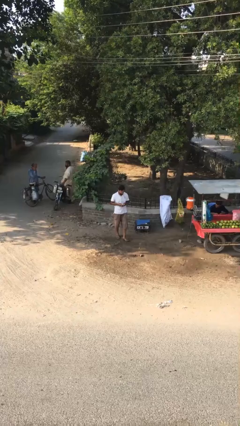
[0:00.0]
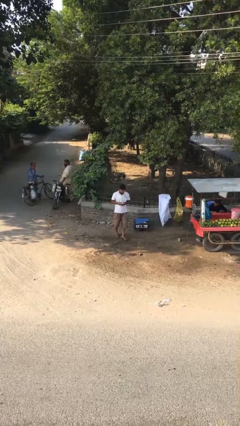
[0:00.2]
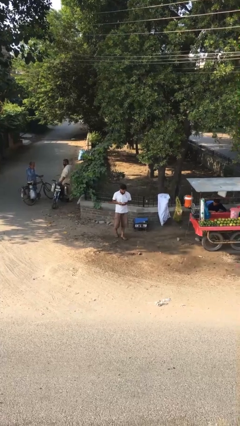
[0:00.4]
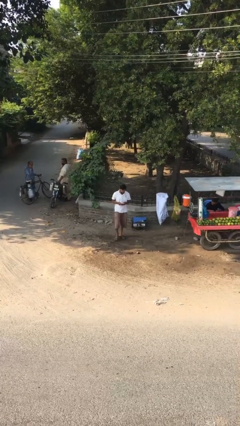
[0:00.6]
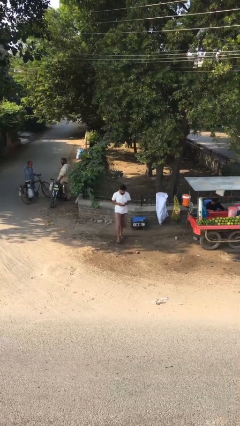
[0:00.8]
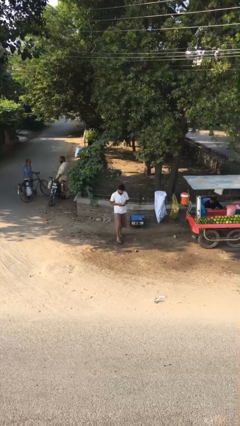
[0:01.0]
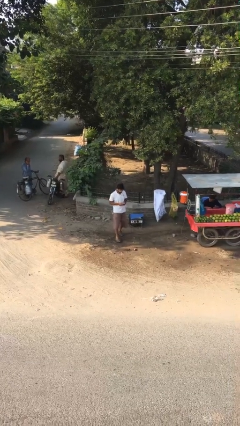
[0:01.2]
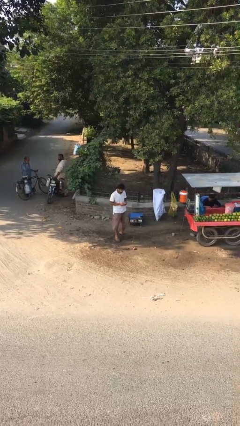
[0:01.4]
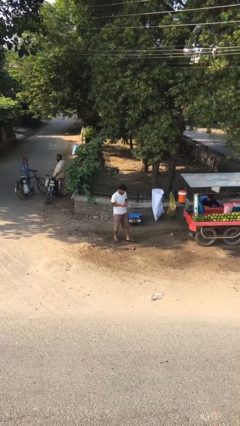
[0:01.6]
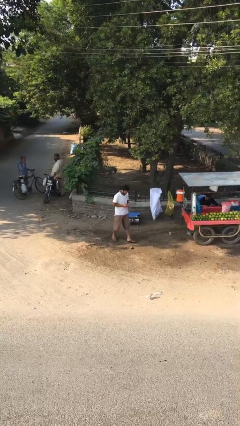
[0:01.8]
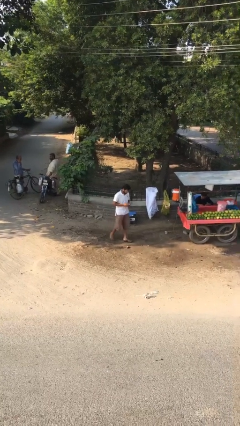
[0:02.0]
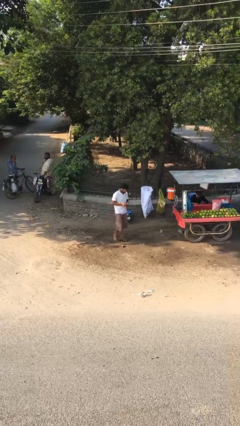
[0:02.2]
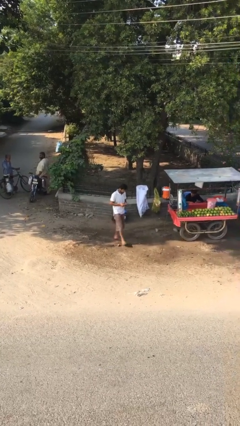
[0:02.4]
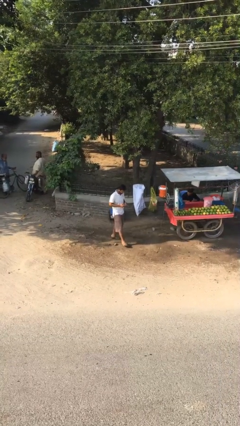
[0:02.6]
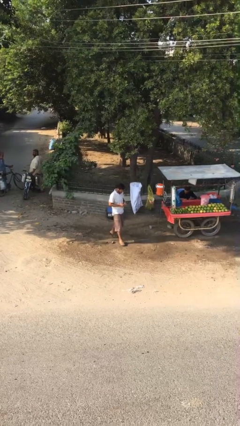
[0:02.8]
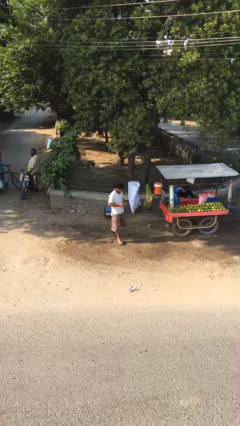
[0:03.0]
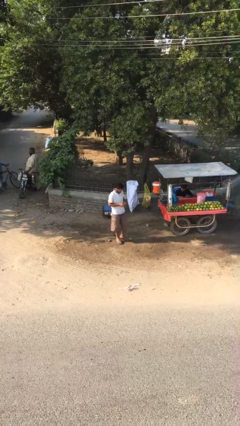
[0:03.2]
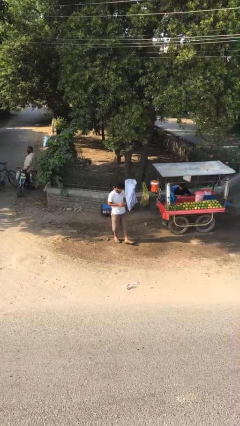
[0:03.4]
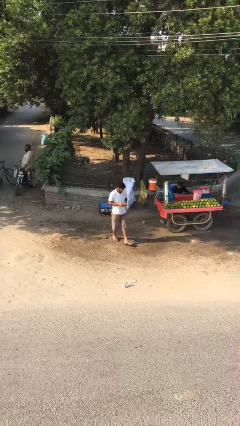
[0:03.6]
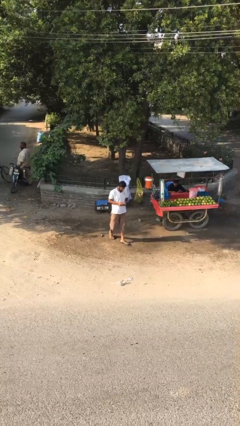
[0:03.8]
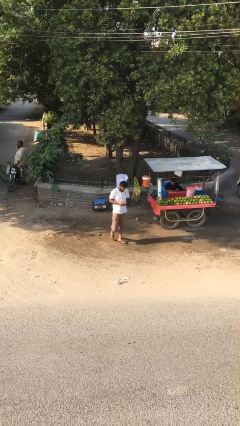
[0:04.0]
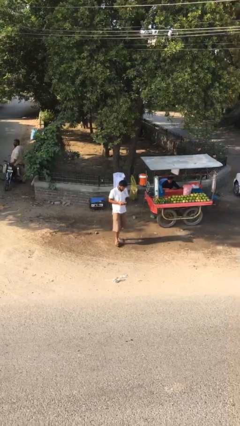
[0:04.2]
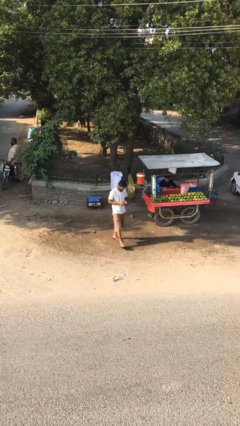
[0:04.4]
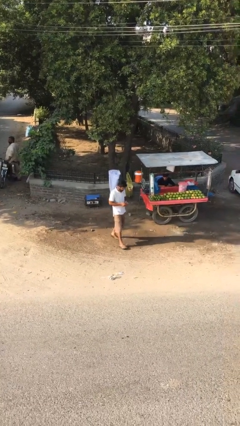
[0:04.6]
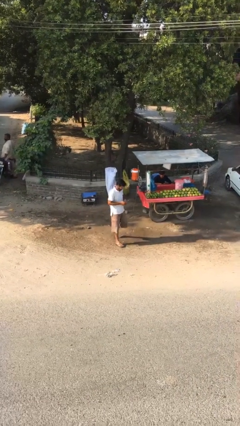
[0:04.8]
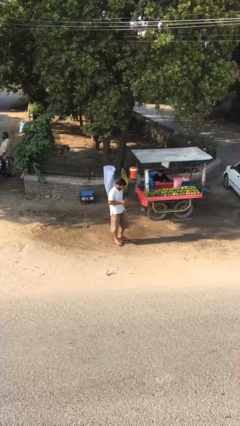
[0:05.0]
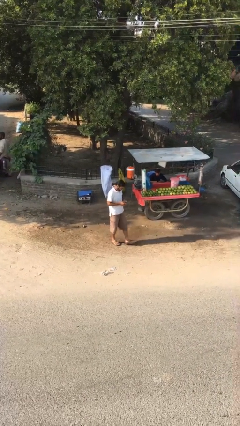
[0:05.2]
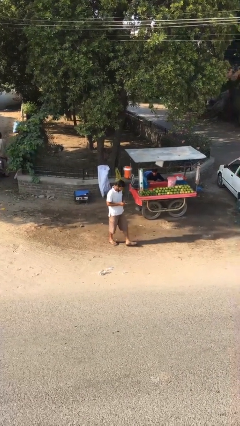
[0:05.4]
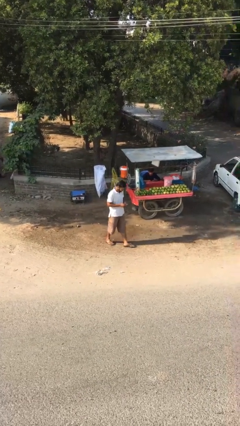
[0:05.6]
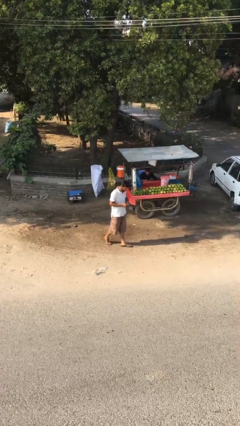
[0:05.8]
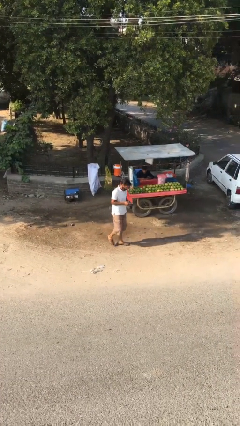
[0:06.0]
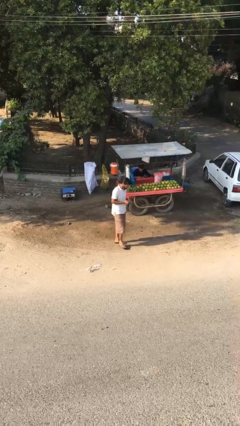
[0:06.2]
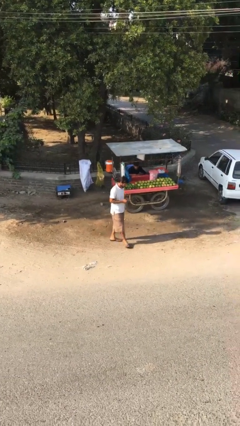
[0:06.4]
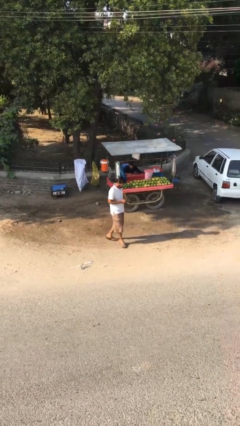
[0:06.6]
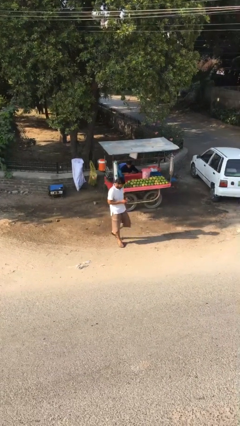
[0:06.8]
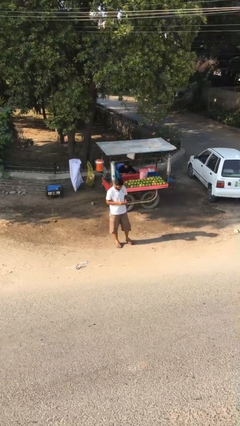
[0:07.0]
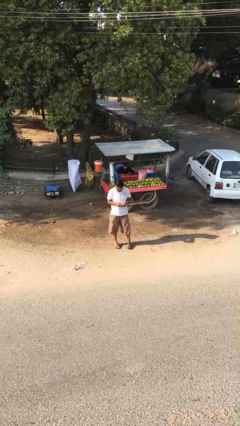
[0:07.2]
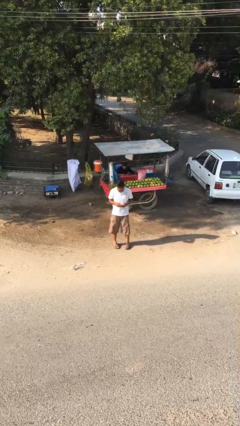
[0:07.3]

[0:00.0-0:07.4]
person texts on phone

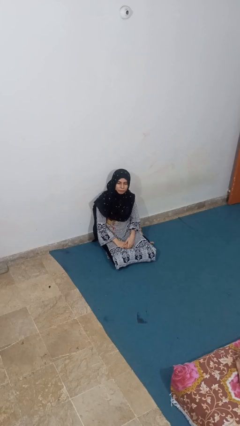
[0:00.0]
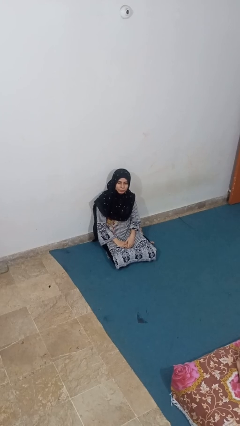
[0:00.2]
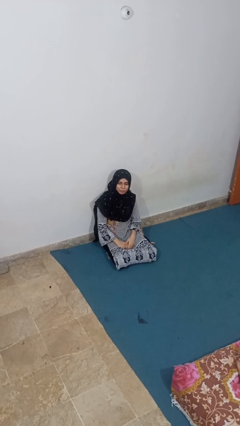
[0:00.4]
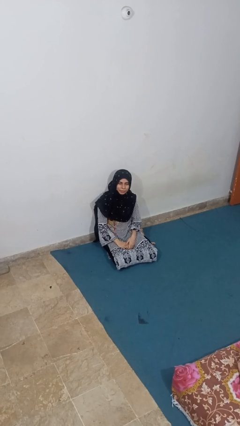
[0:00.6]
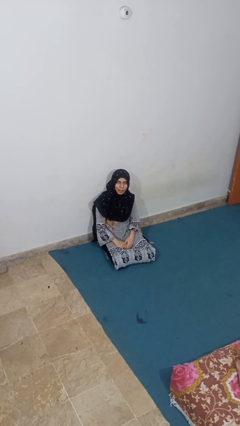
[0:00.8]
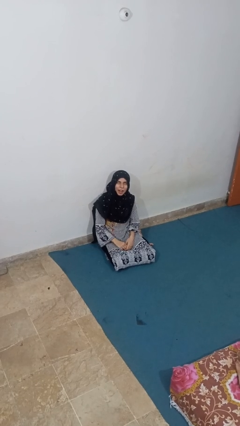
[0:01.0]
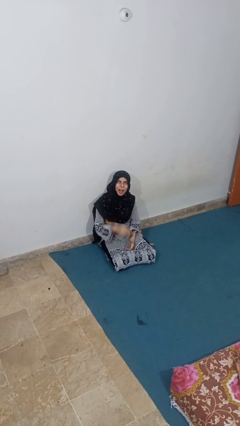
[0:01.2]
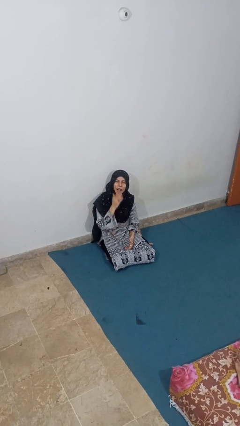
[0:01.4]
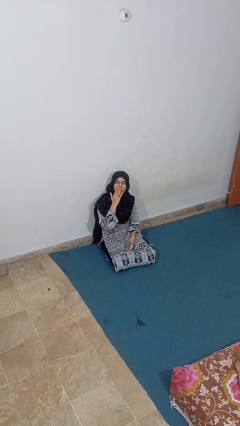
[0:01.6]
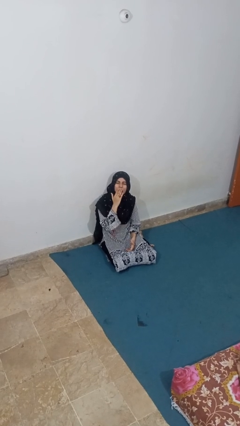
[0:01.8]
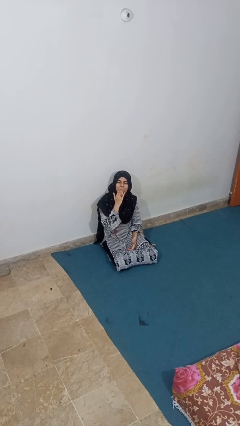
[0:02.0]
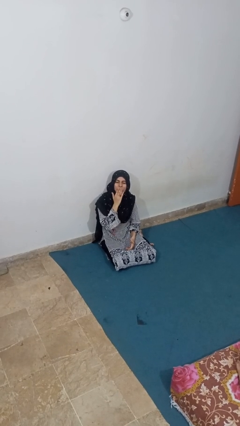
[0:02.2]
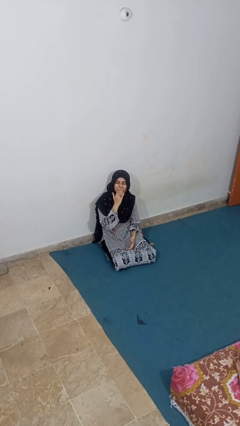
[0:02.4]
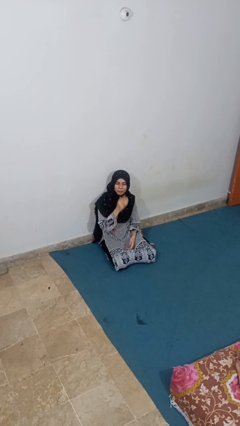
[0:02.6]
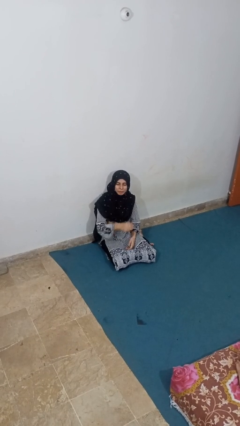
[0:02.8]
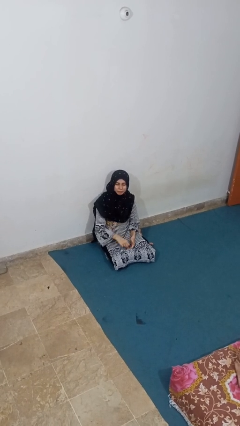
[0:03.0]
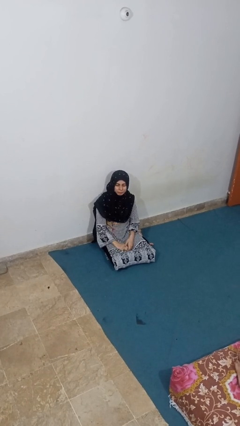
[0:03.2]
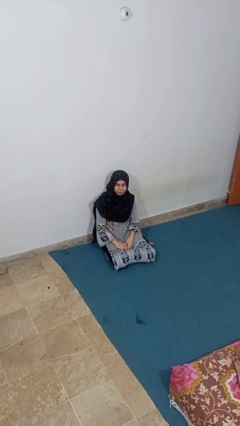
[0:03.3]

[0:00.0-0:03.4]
person yawns

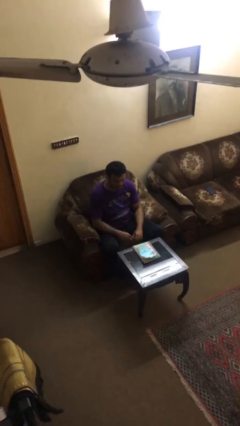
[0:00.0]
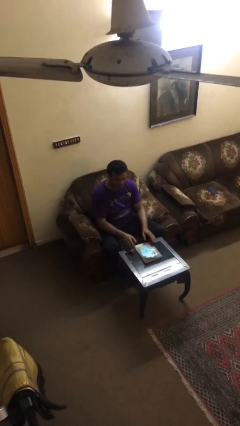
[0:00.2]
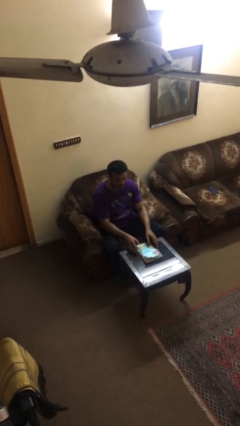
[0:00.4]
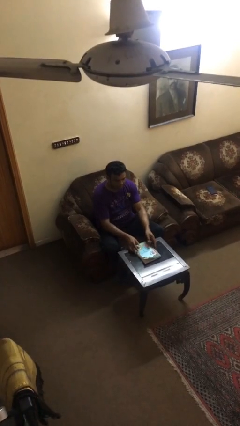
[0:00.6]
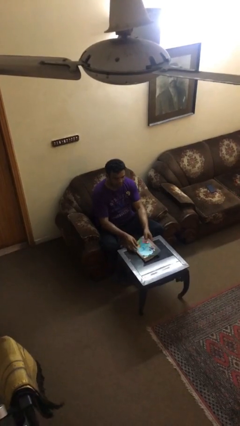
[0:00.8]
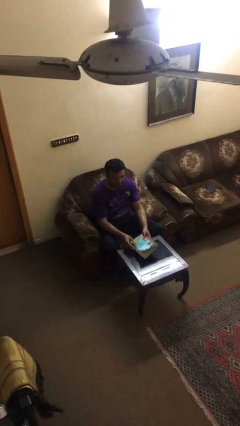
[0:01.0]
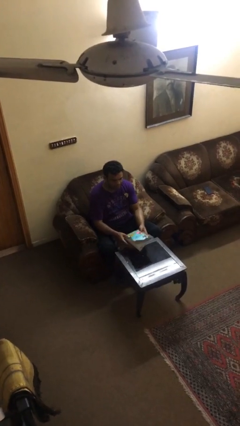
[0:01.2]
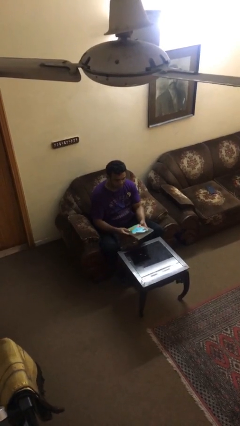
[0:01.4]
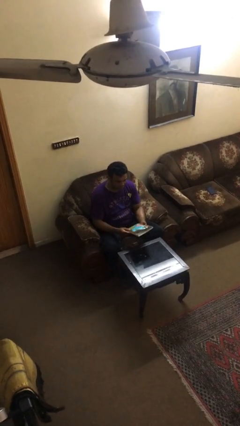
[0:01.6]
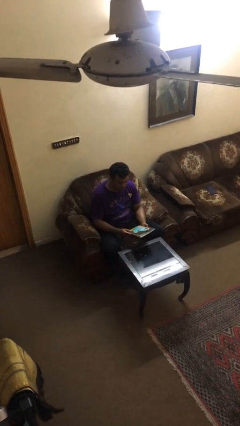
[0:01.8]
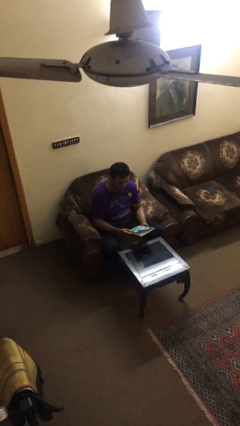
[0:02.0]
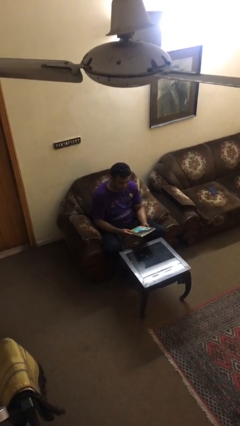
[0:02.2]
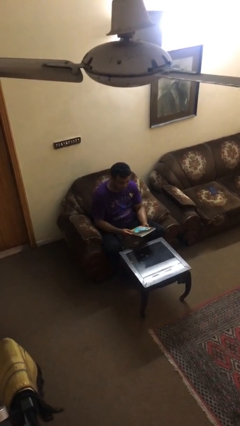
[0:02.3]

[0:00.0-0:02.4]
person picks up object from table

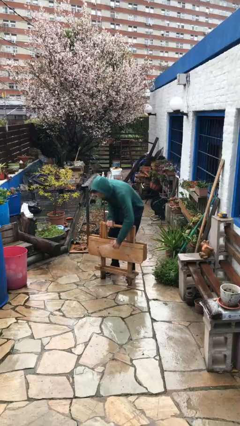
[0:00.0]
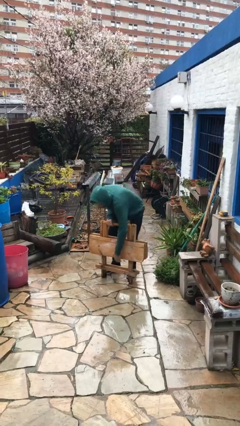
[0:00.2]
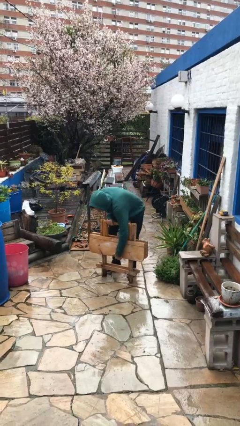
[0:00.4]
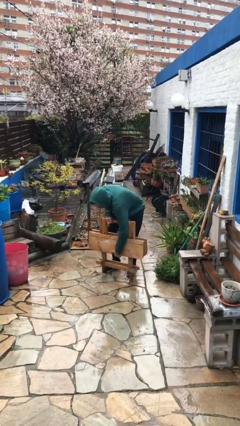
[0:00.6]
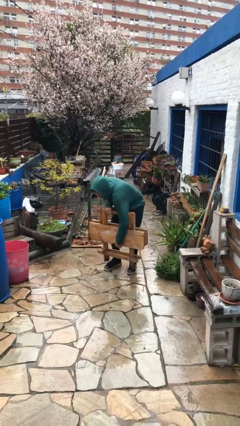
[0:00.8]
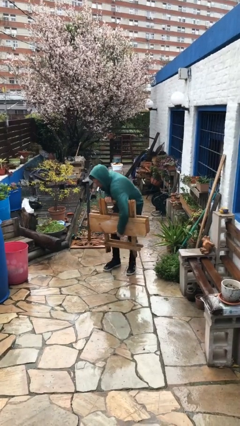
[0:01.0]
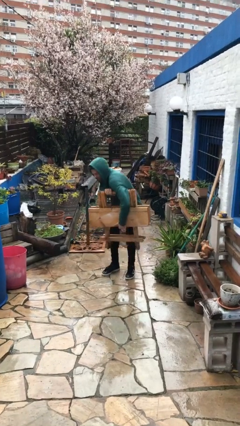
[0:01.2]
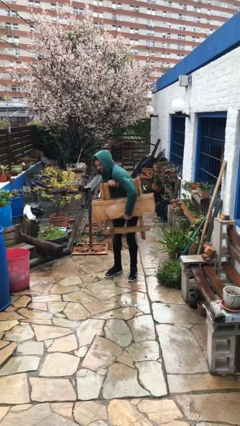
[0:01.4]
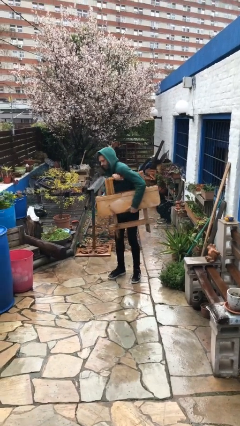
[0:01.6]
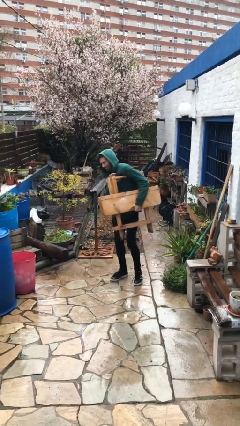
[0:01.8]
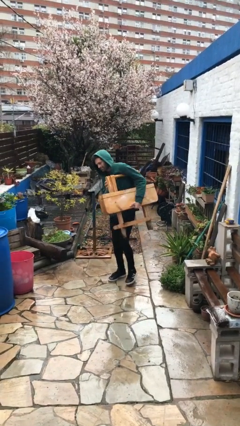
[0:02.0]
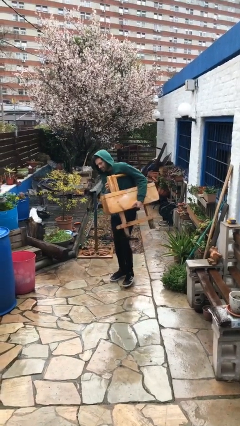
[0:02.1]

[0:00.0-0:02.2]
person picks up object from floor

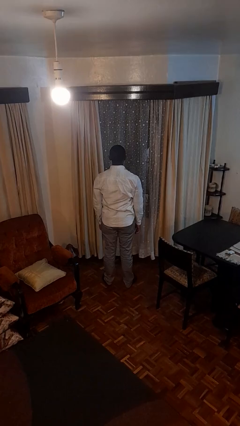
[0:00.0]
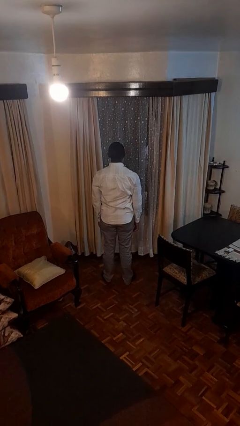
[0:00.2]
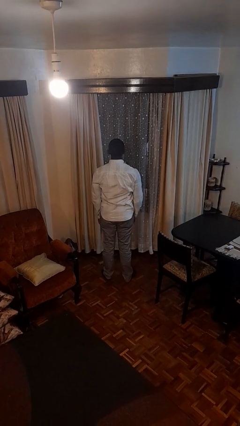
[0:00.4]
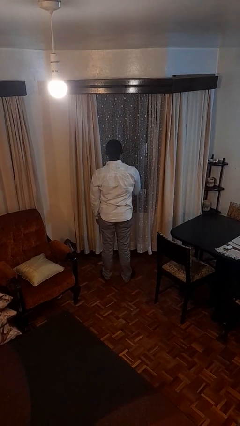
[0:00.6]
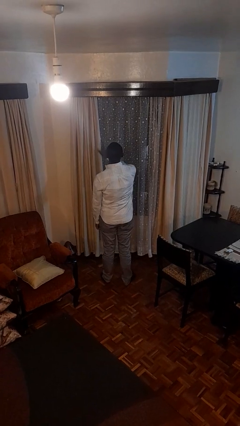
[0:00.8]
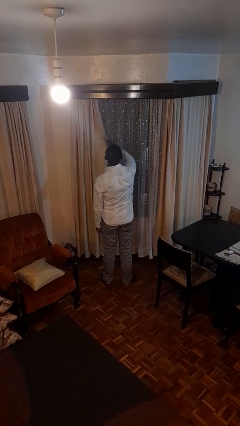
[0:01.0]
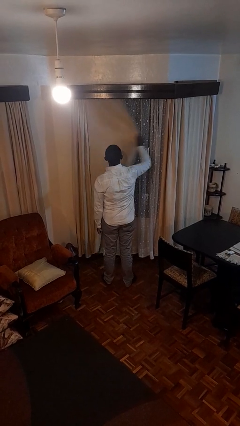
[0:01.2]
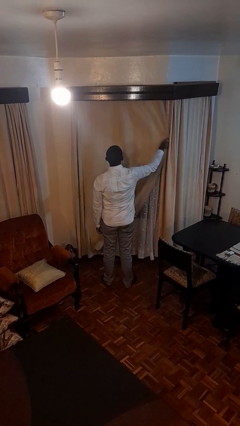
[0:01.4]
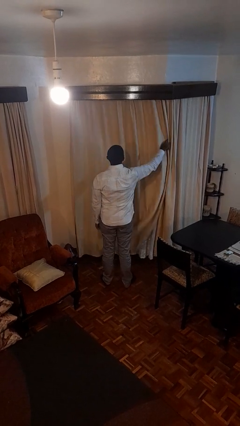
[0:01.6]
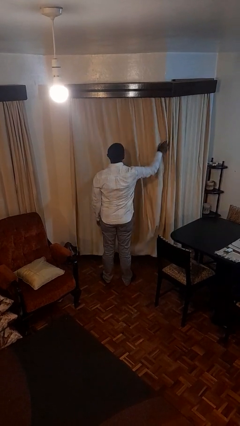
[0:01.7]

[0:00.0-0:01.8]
person closes curtains

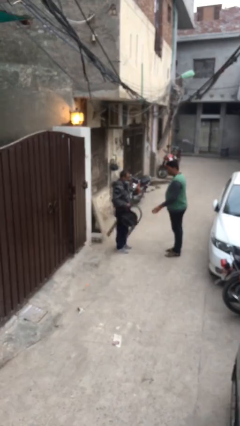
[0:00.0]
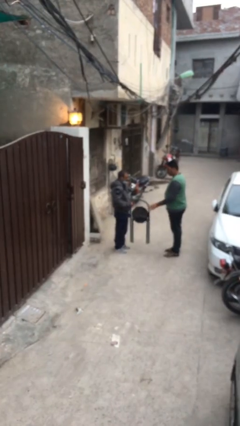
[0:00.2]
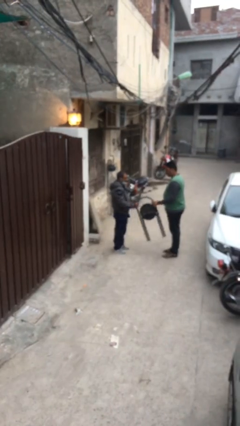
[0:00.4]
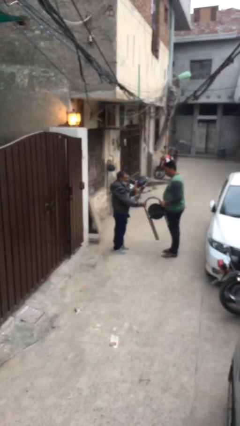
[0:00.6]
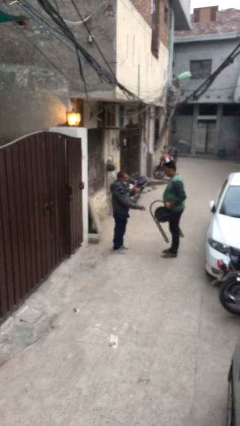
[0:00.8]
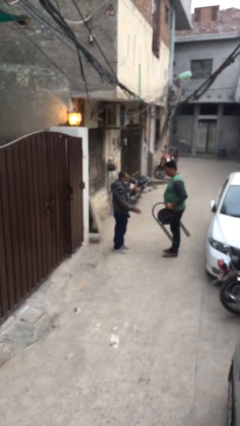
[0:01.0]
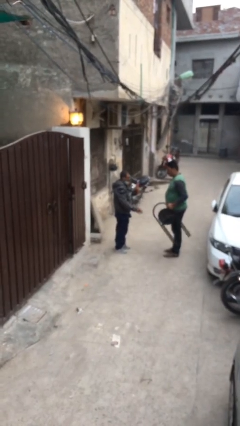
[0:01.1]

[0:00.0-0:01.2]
person transfers object to person
